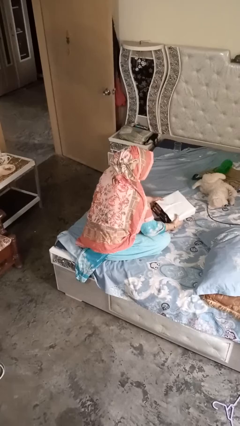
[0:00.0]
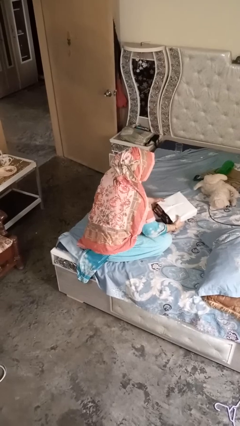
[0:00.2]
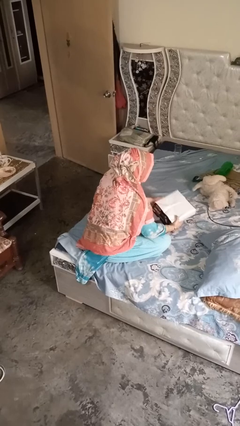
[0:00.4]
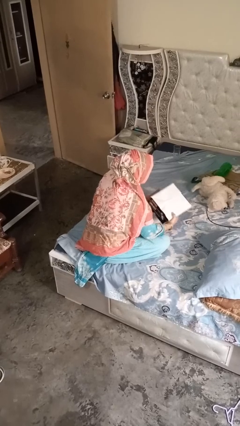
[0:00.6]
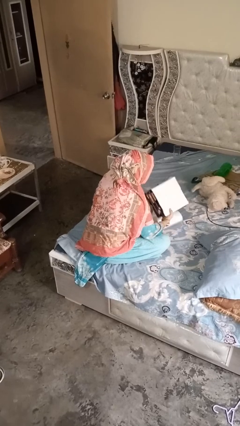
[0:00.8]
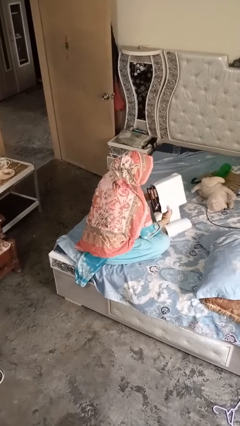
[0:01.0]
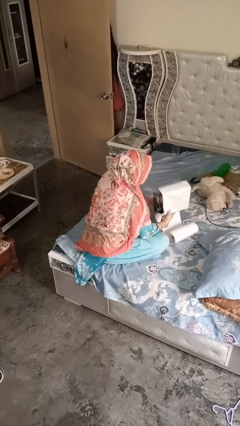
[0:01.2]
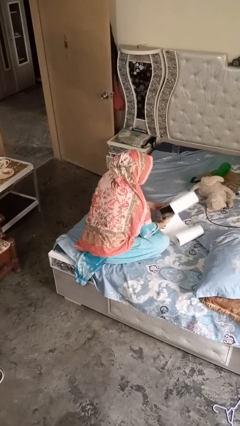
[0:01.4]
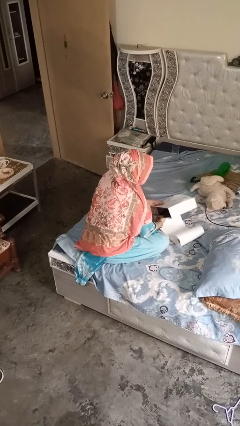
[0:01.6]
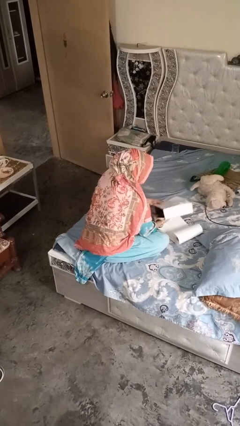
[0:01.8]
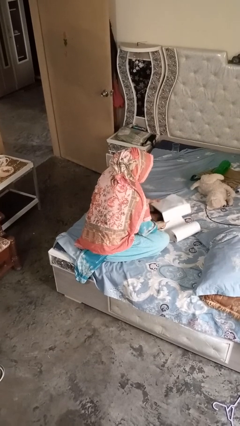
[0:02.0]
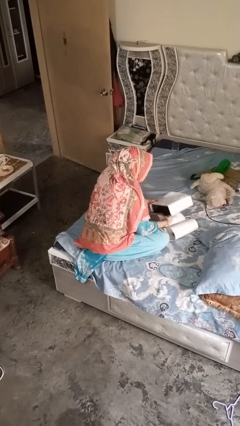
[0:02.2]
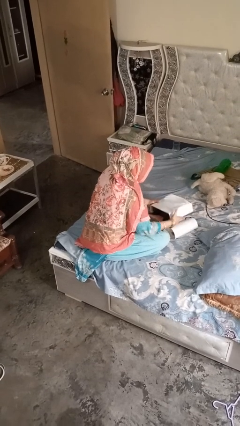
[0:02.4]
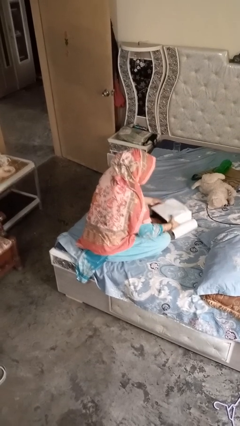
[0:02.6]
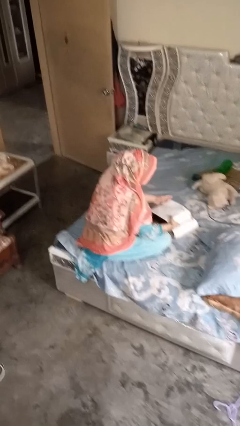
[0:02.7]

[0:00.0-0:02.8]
person wraps box

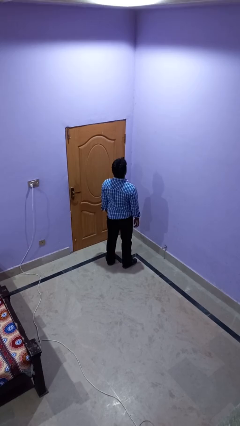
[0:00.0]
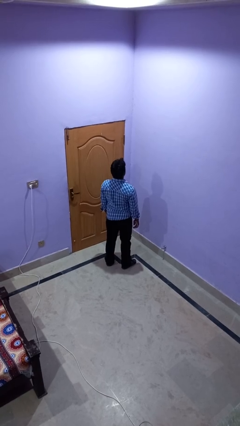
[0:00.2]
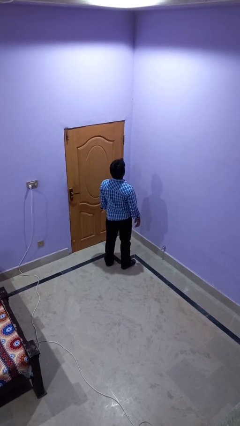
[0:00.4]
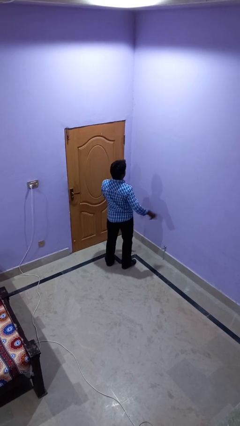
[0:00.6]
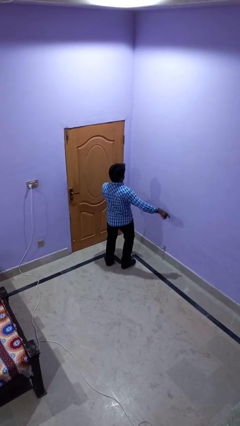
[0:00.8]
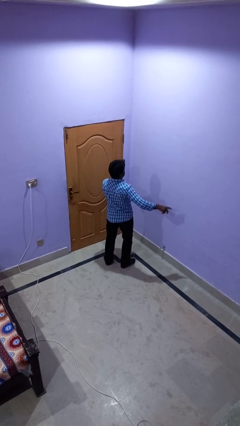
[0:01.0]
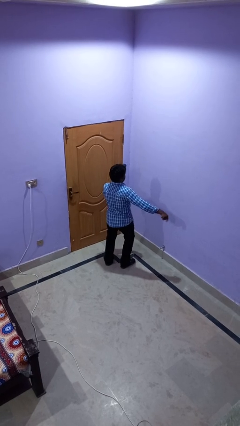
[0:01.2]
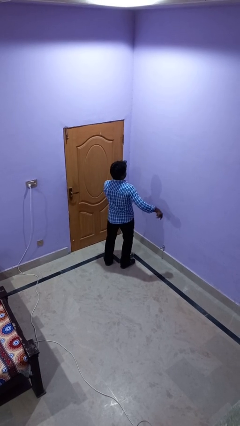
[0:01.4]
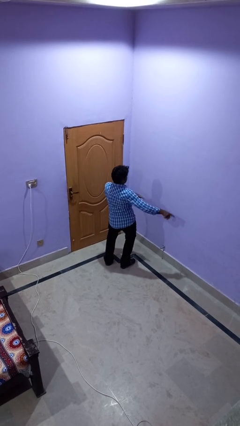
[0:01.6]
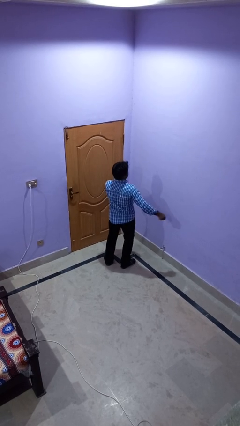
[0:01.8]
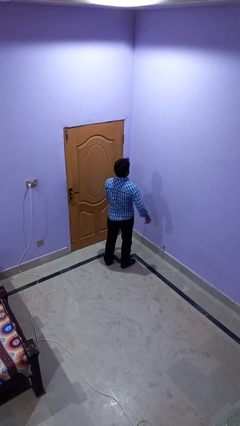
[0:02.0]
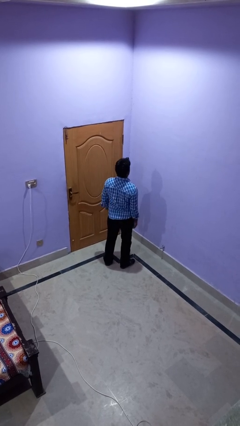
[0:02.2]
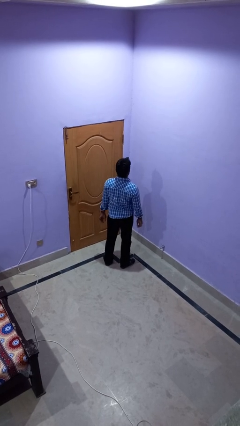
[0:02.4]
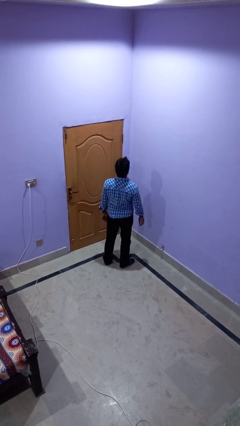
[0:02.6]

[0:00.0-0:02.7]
person dances in place

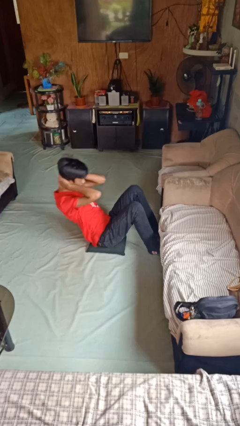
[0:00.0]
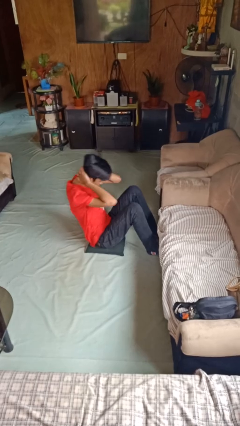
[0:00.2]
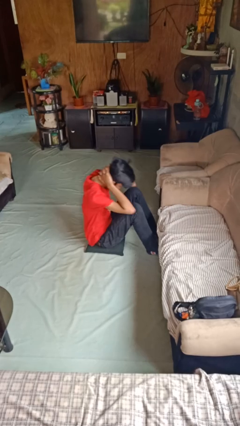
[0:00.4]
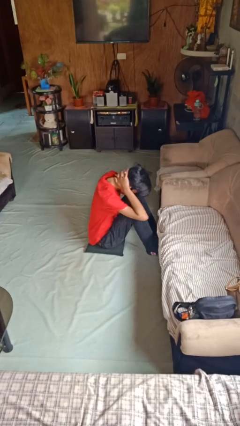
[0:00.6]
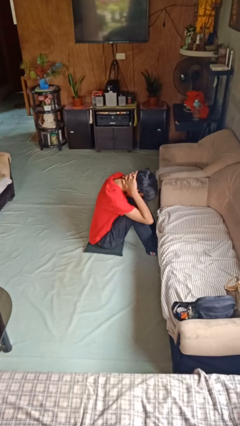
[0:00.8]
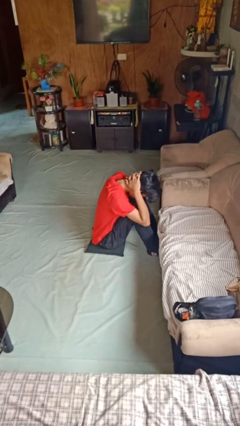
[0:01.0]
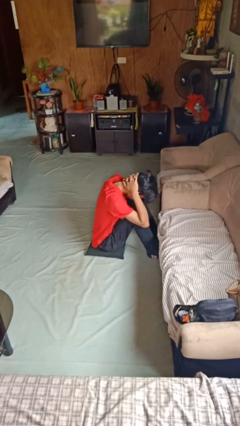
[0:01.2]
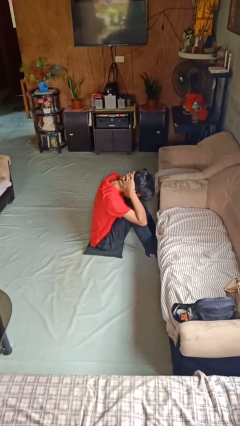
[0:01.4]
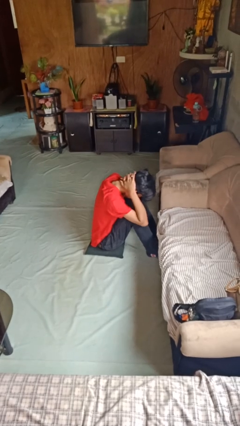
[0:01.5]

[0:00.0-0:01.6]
person exercises with situp

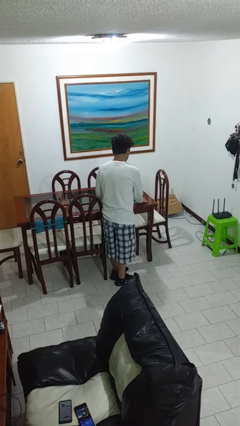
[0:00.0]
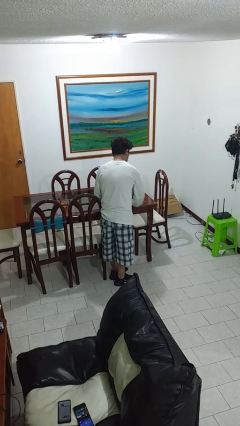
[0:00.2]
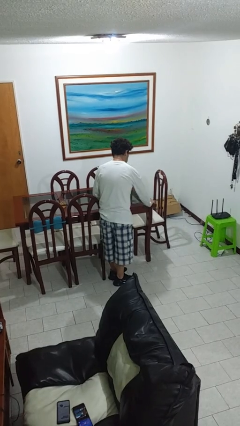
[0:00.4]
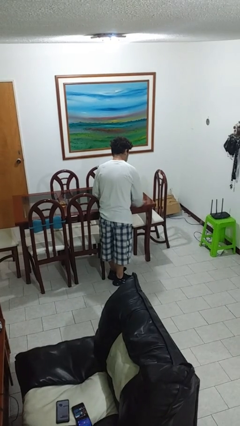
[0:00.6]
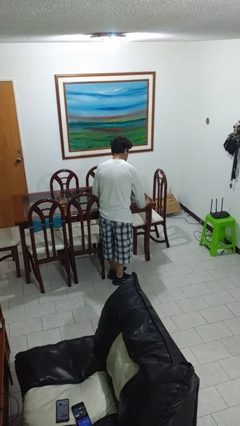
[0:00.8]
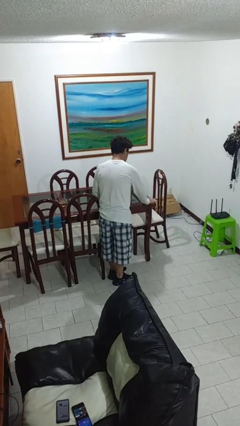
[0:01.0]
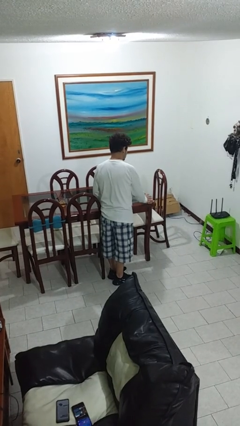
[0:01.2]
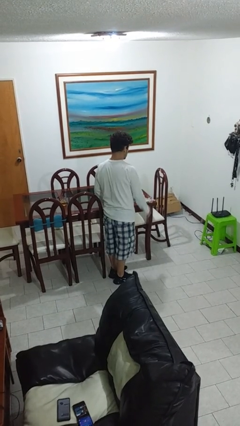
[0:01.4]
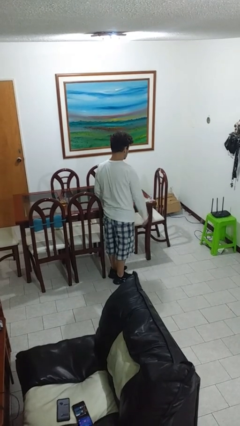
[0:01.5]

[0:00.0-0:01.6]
person cleans table with rag

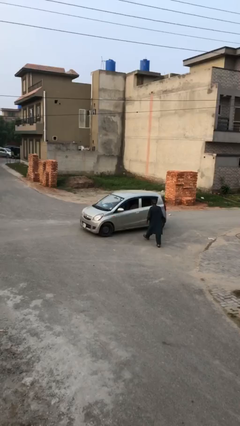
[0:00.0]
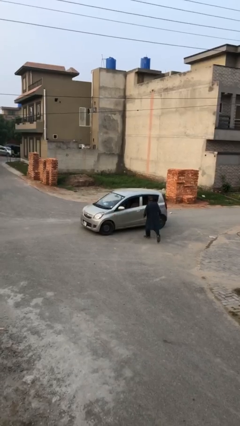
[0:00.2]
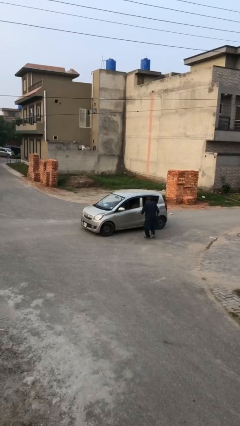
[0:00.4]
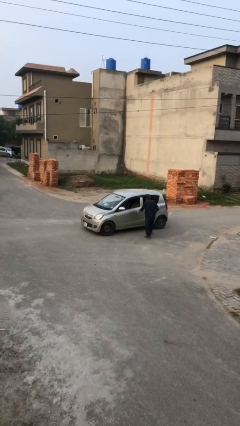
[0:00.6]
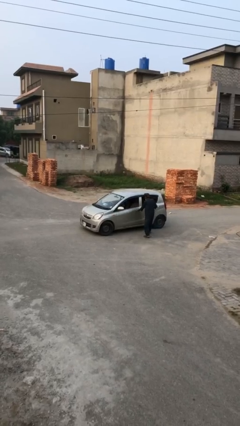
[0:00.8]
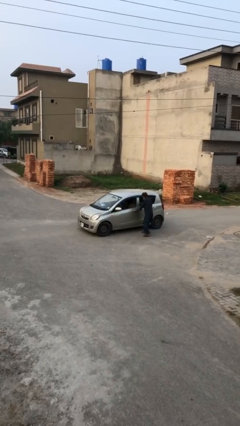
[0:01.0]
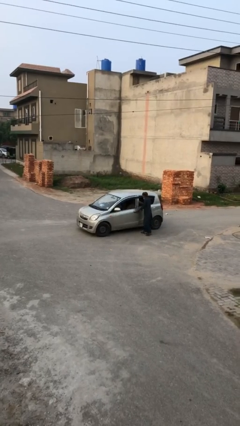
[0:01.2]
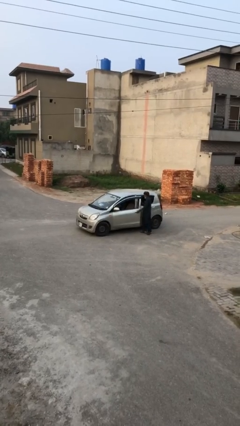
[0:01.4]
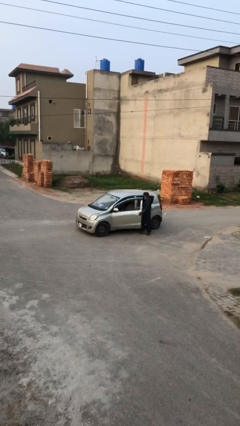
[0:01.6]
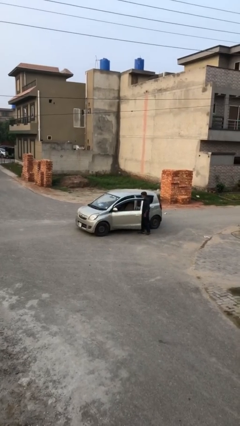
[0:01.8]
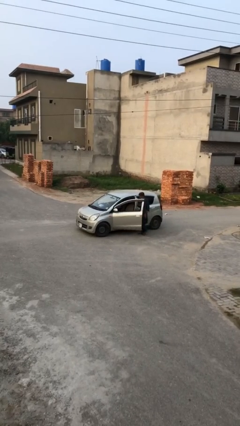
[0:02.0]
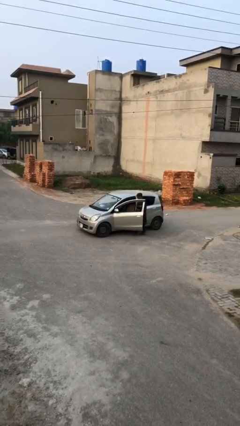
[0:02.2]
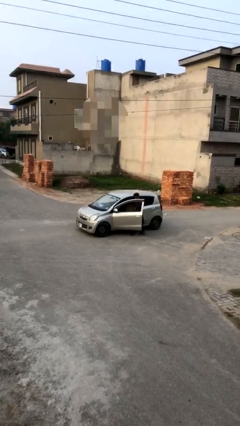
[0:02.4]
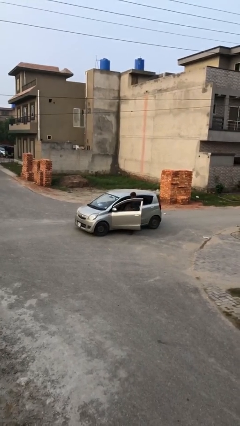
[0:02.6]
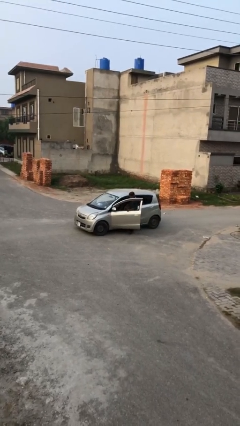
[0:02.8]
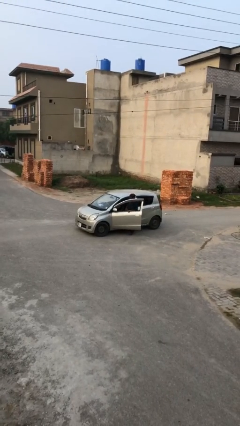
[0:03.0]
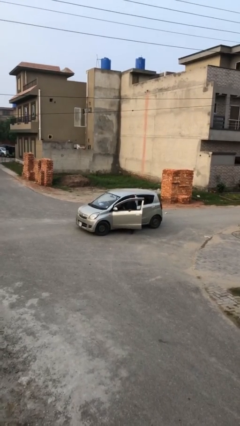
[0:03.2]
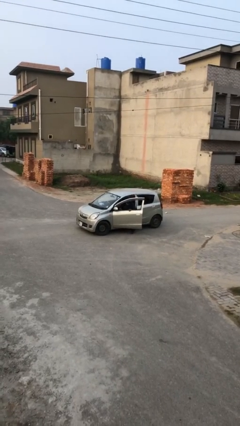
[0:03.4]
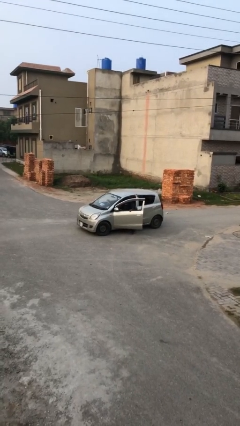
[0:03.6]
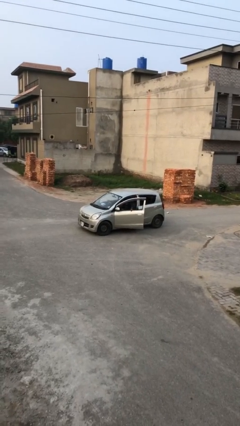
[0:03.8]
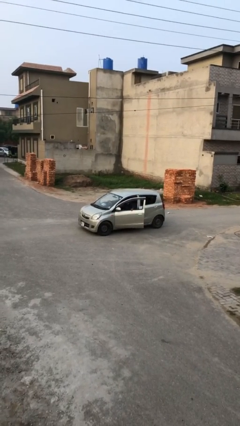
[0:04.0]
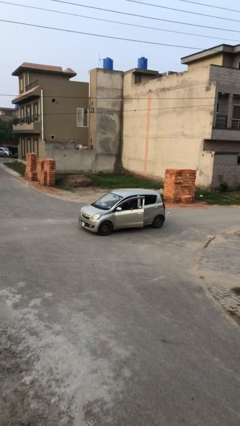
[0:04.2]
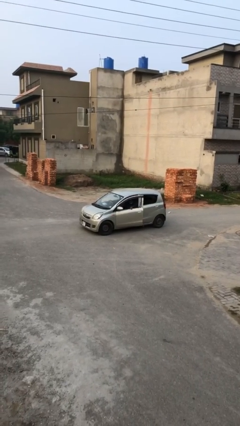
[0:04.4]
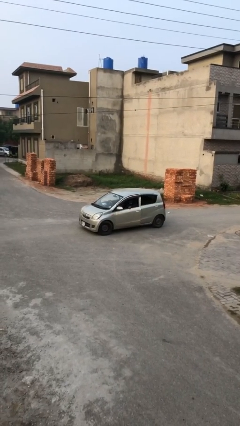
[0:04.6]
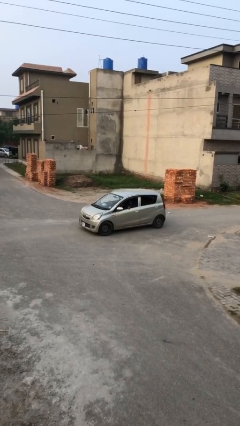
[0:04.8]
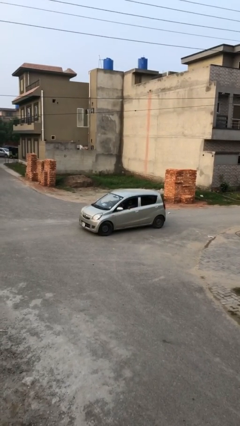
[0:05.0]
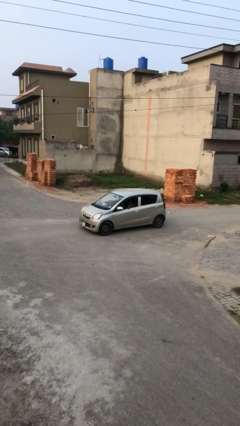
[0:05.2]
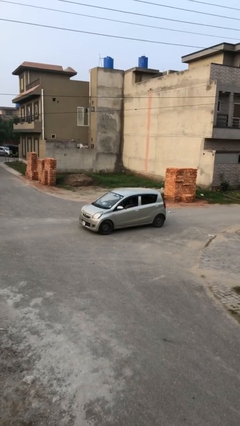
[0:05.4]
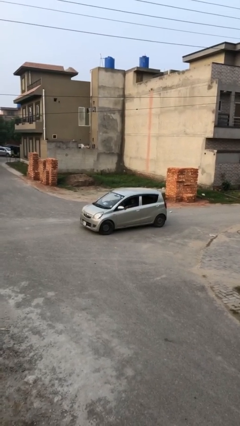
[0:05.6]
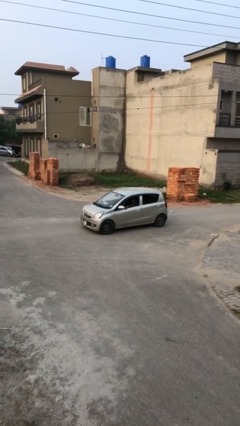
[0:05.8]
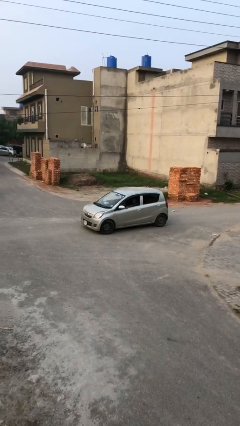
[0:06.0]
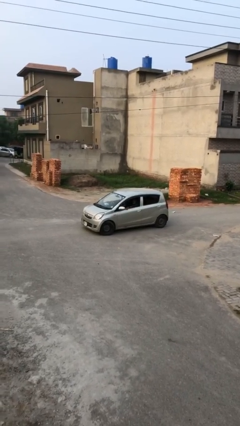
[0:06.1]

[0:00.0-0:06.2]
car picks up person

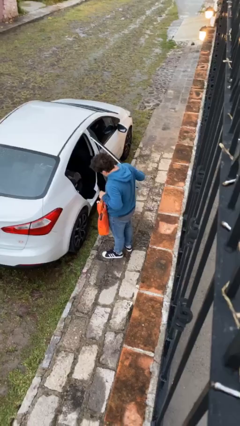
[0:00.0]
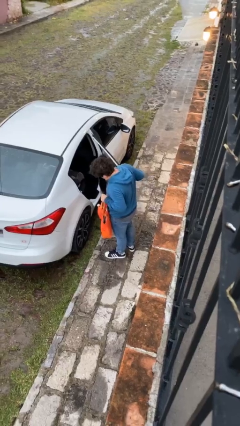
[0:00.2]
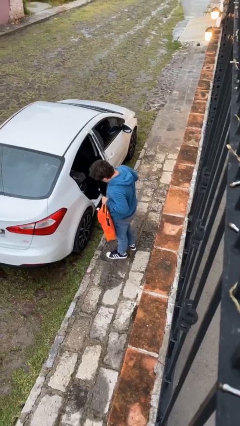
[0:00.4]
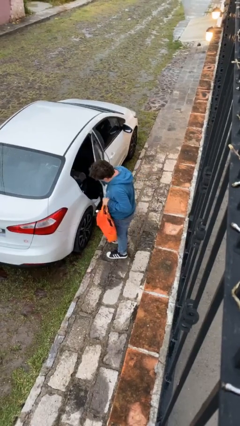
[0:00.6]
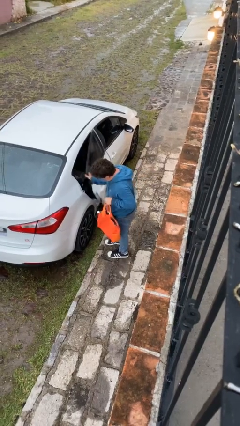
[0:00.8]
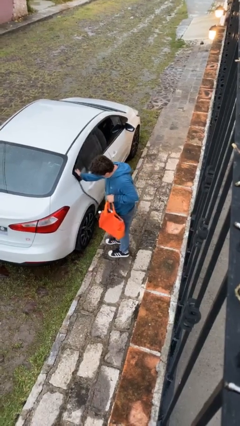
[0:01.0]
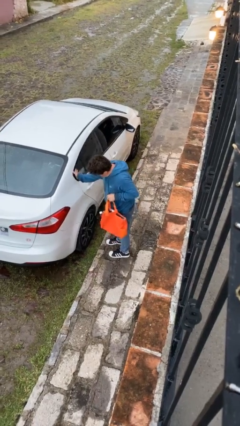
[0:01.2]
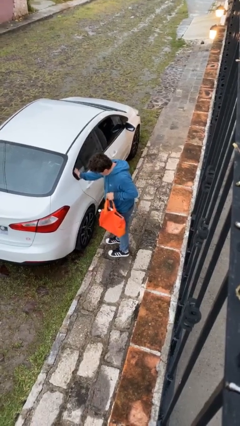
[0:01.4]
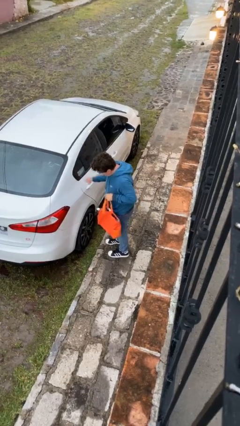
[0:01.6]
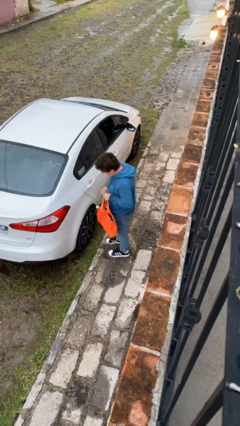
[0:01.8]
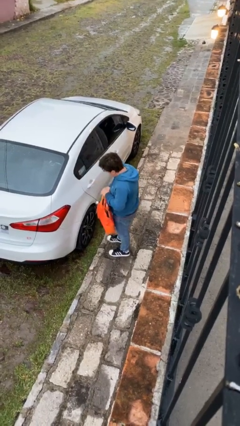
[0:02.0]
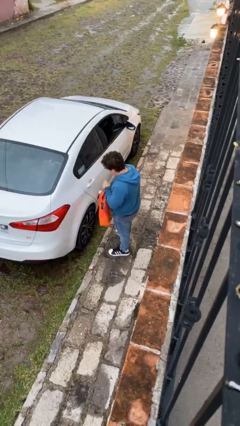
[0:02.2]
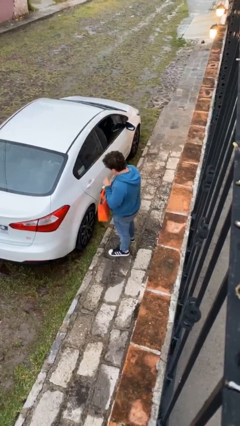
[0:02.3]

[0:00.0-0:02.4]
person closes car door
